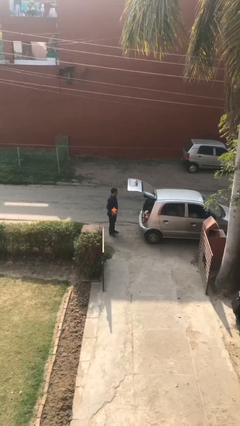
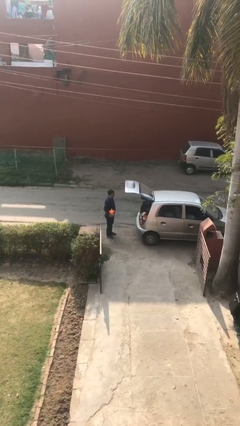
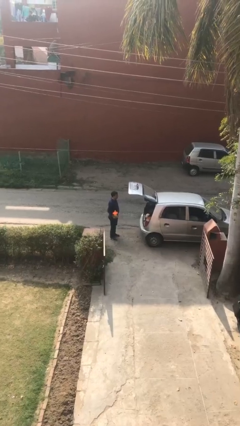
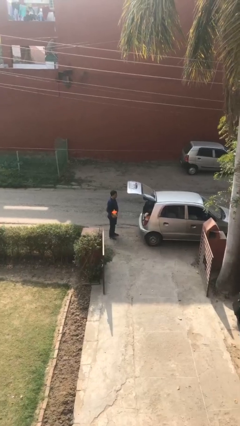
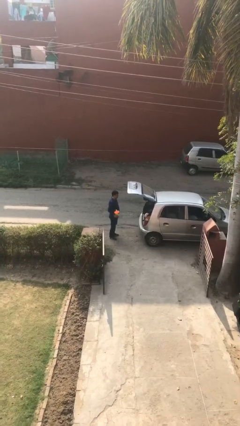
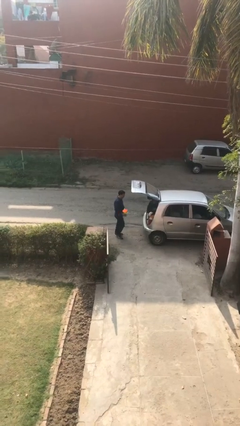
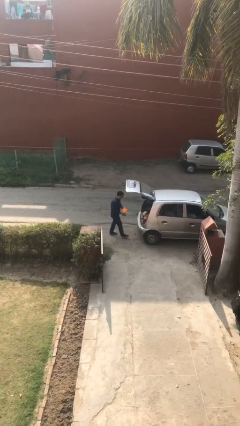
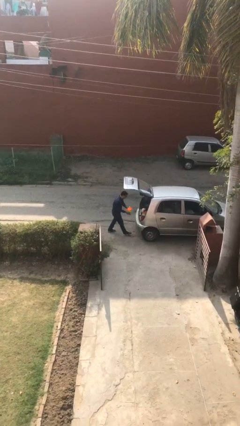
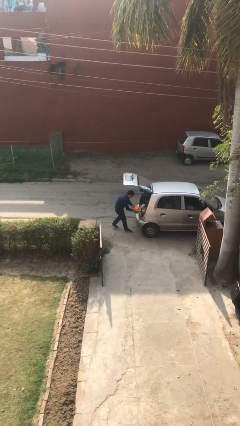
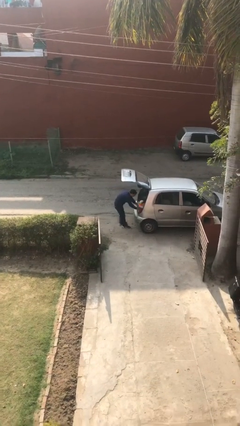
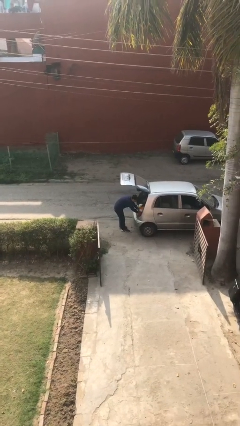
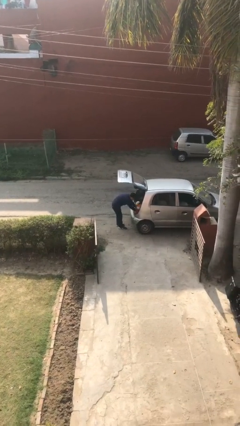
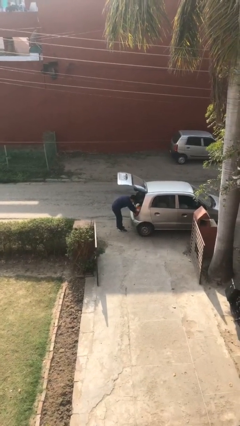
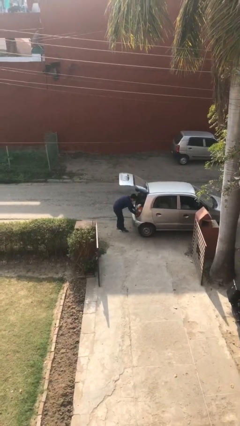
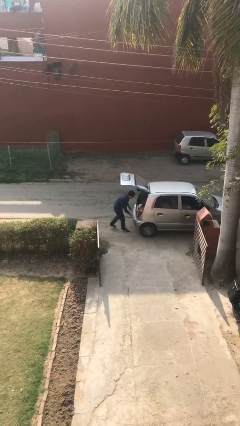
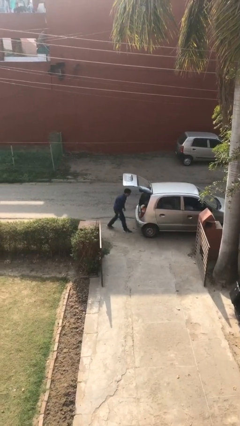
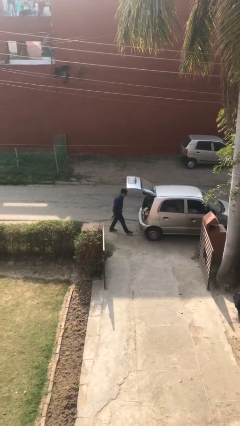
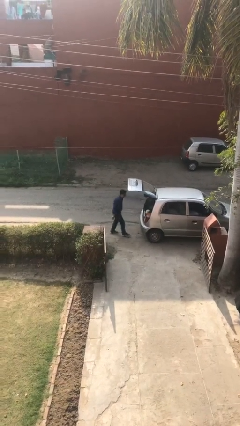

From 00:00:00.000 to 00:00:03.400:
person loads car

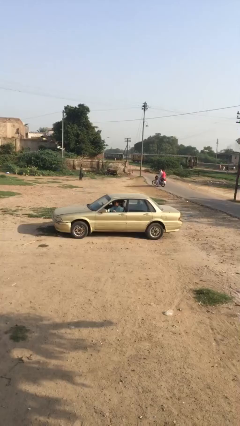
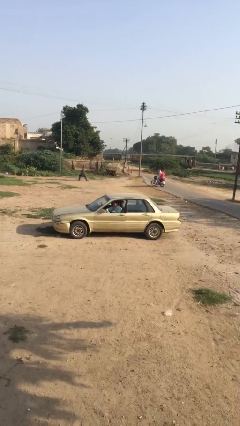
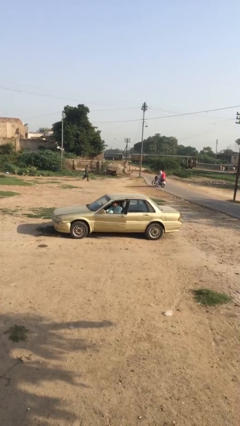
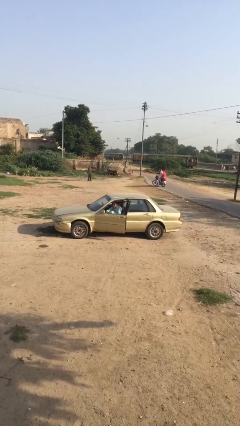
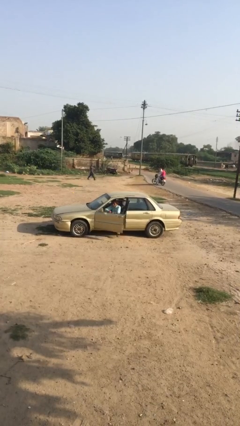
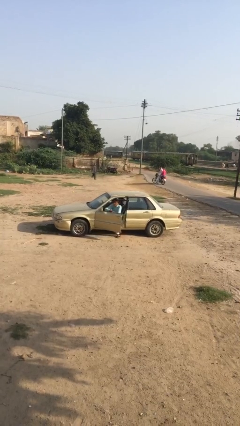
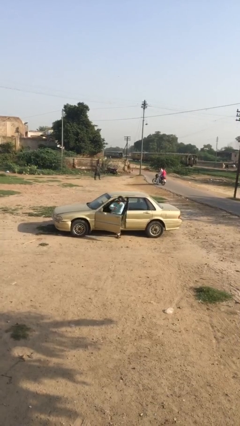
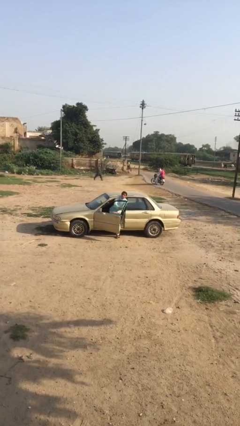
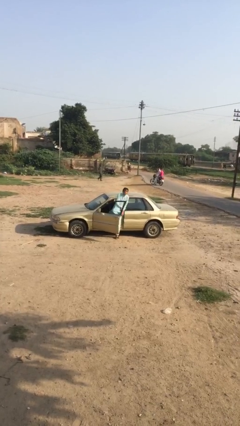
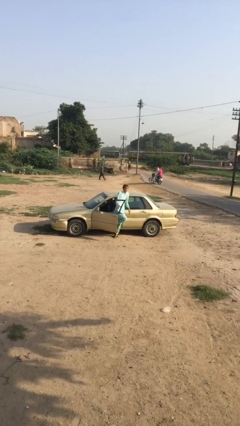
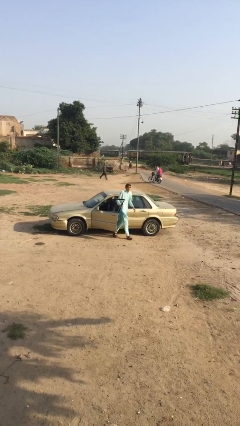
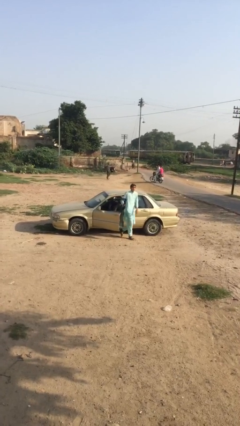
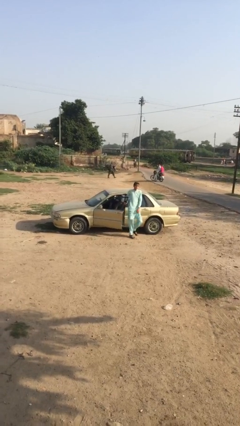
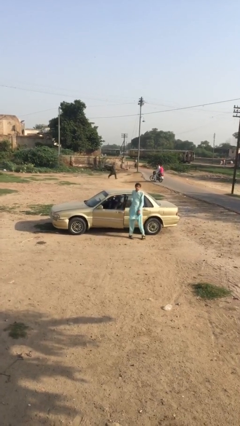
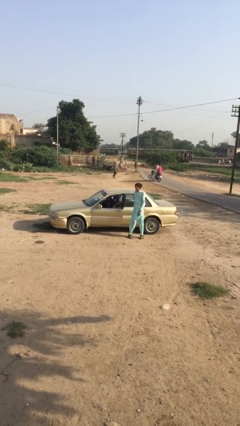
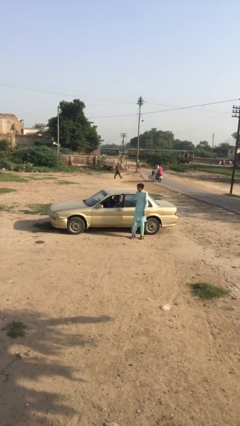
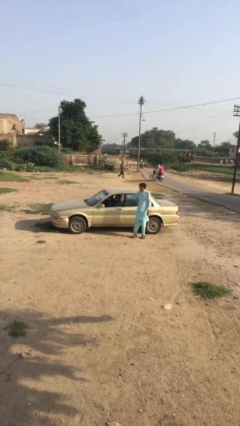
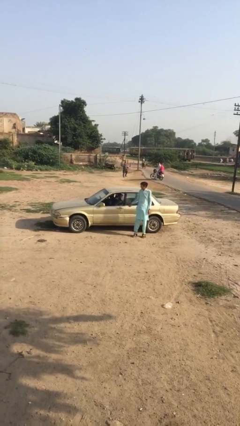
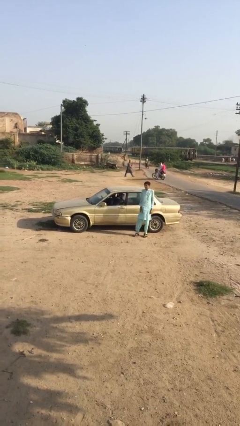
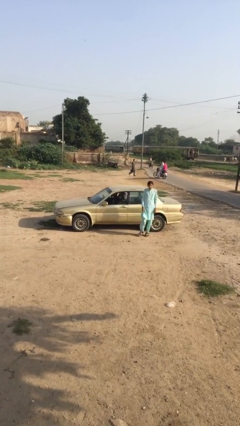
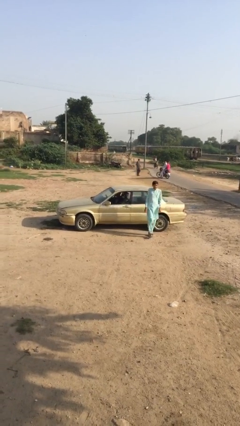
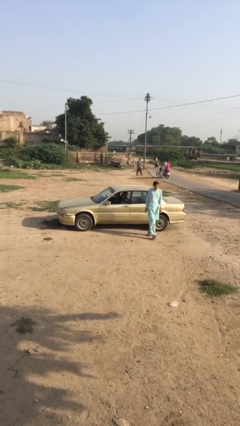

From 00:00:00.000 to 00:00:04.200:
car drops off person

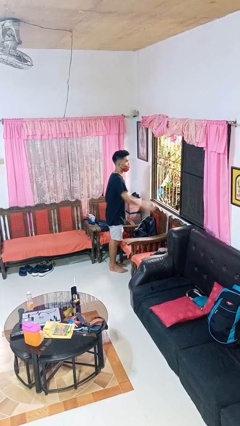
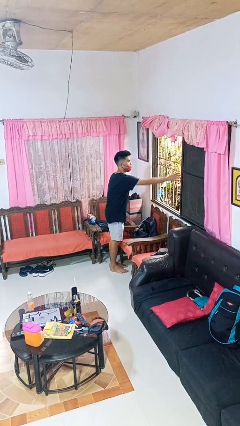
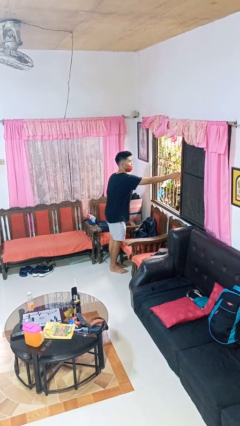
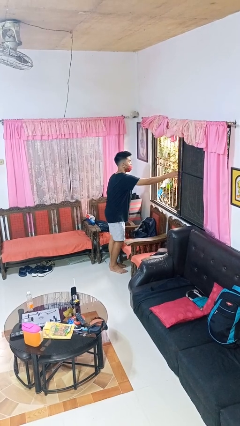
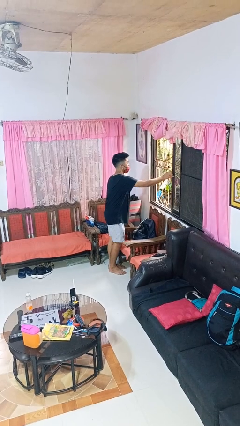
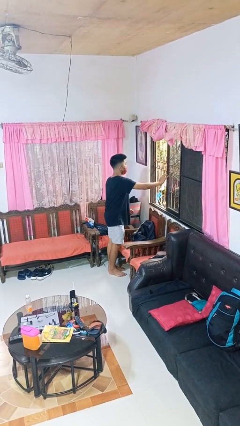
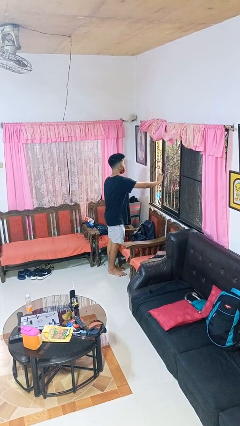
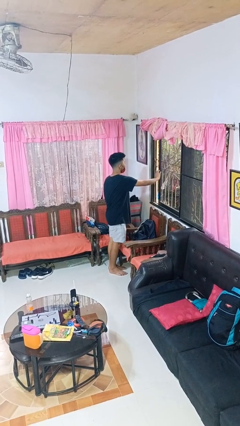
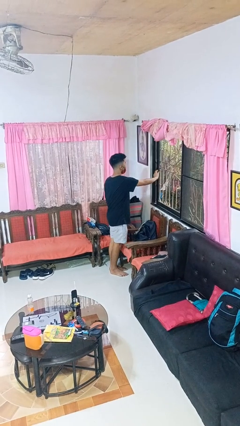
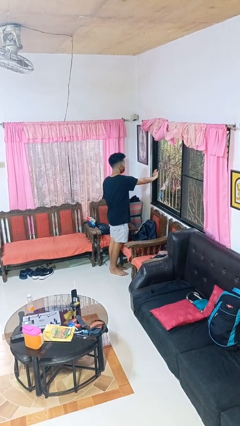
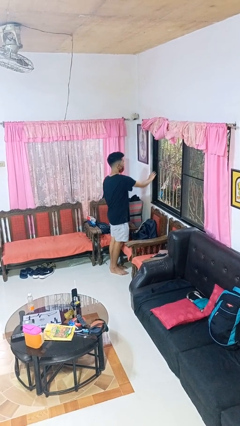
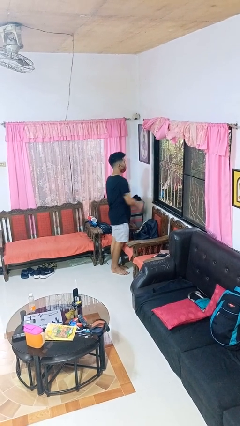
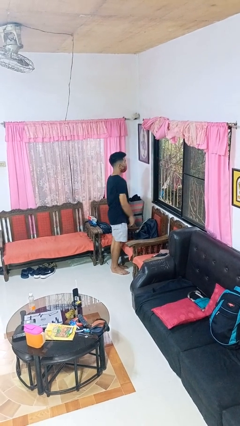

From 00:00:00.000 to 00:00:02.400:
person closes home window

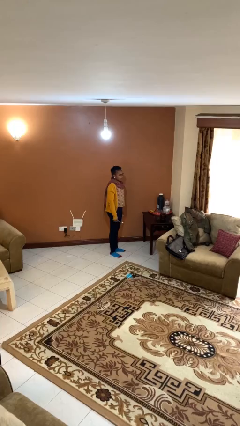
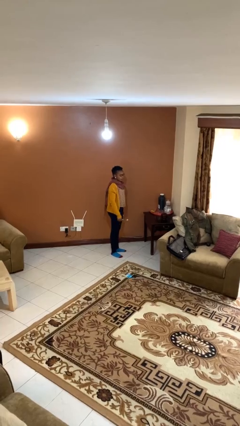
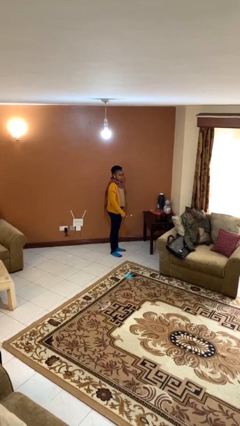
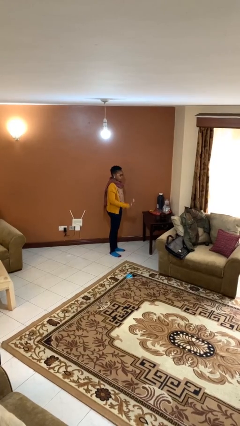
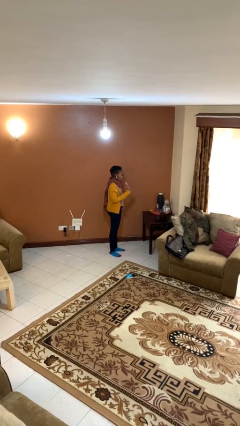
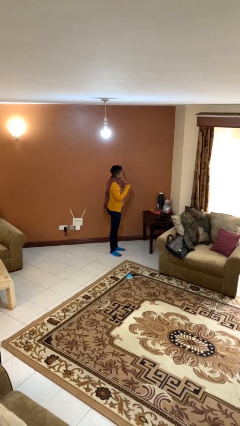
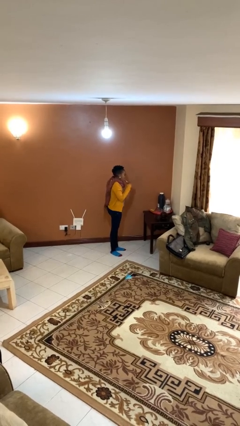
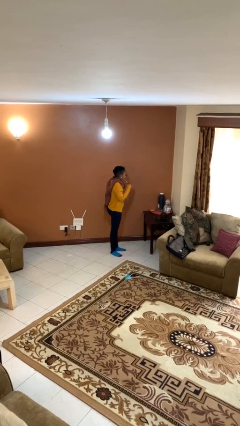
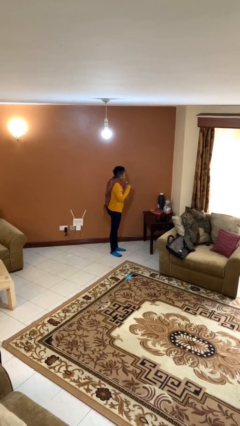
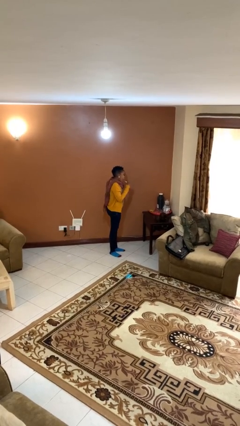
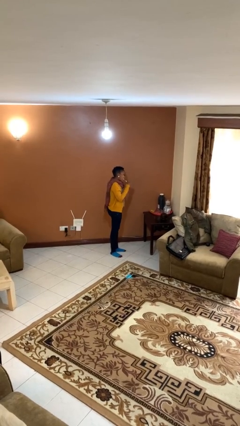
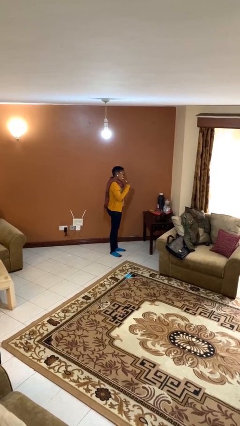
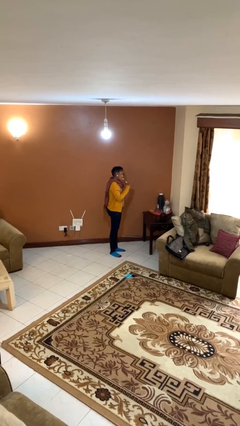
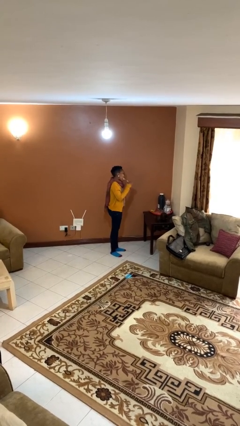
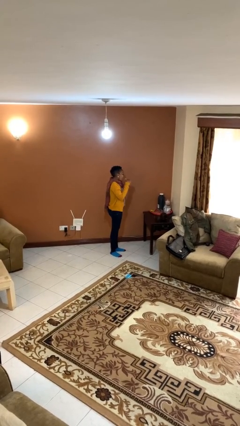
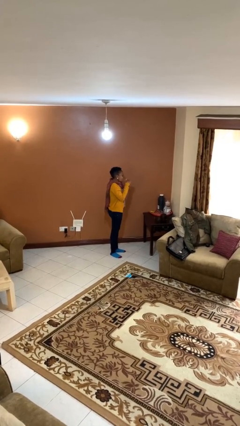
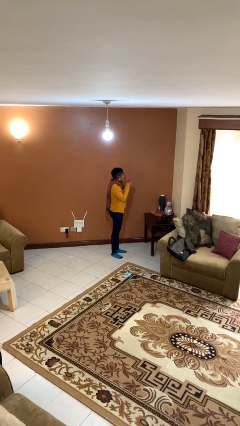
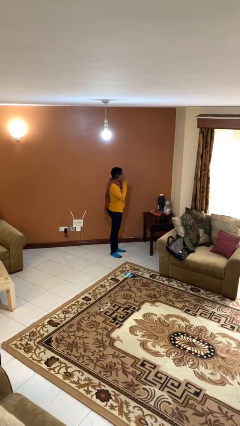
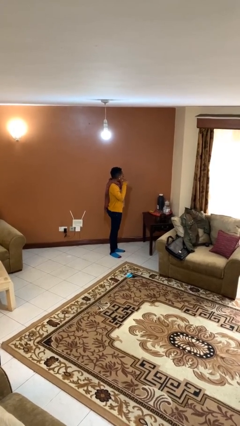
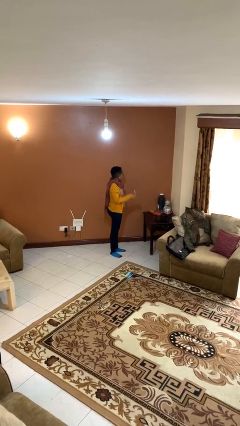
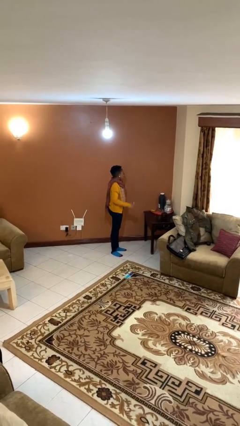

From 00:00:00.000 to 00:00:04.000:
person brushes teeth

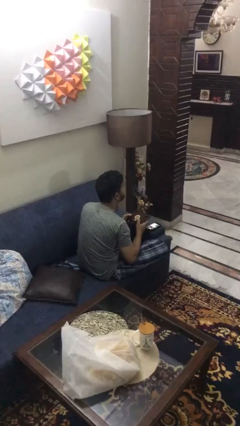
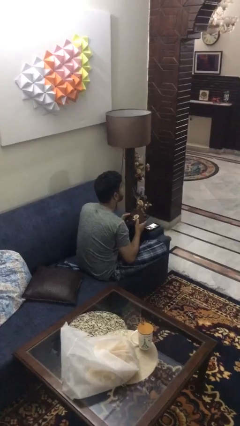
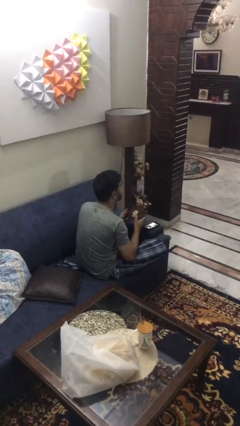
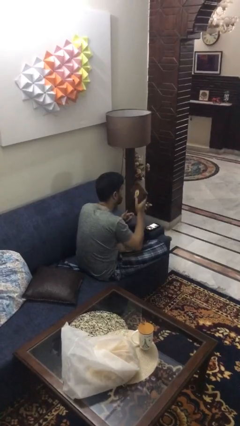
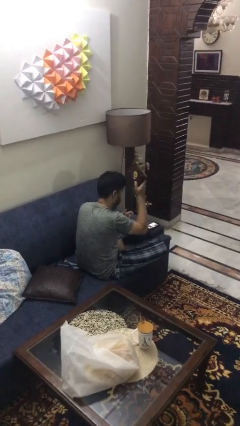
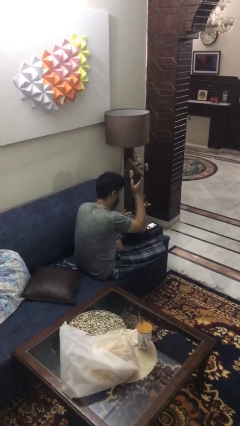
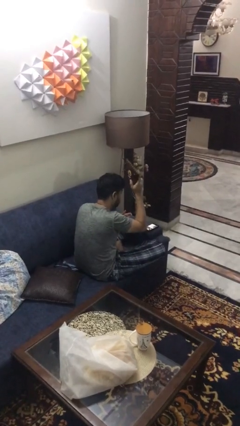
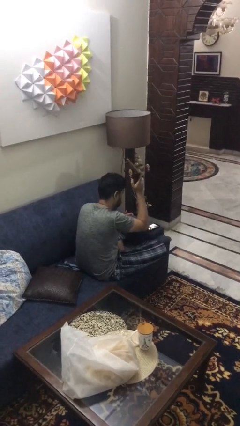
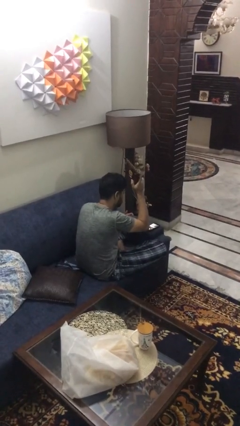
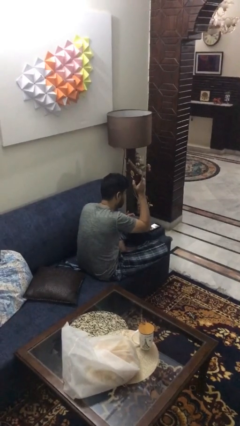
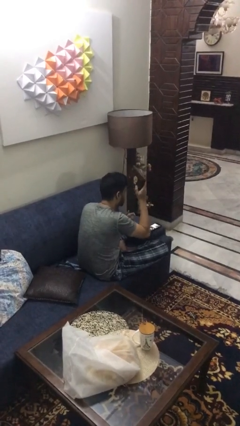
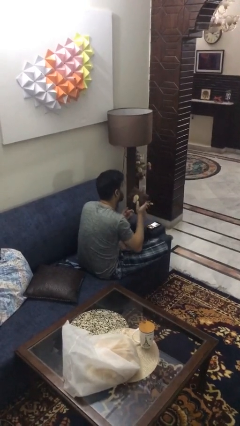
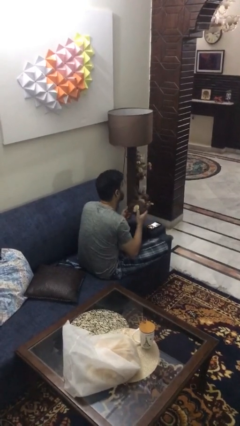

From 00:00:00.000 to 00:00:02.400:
person holds object above head

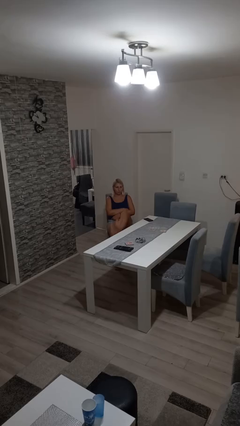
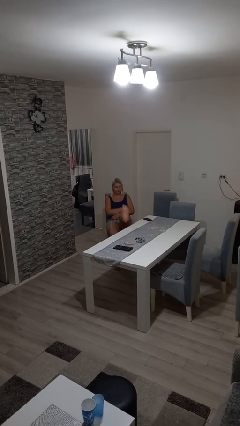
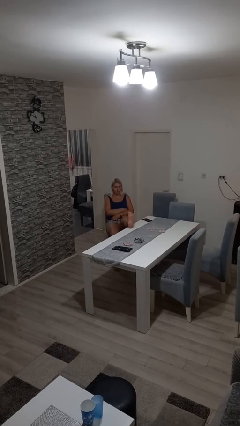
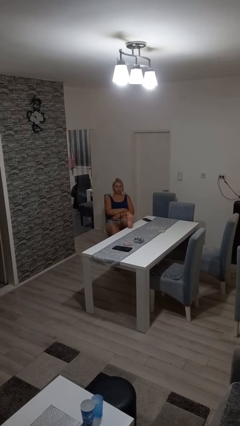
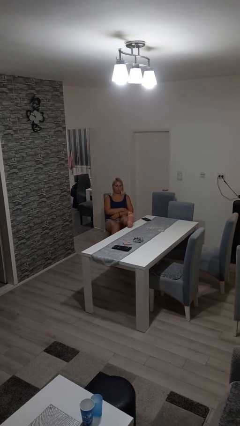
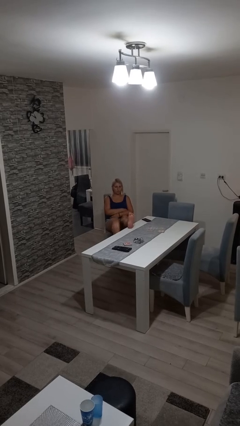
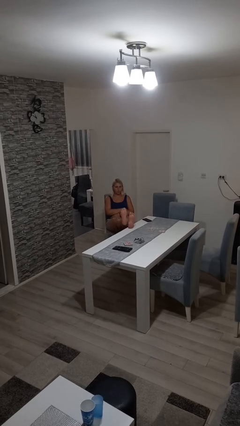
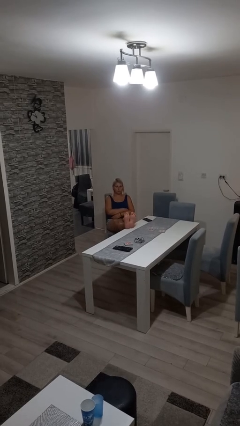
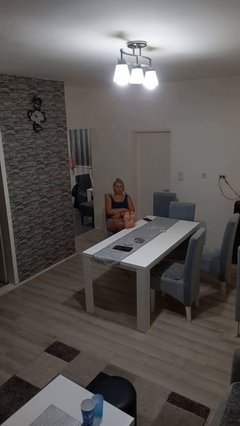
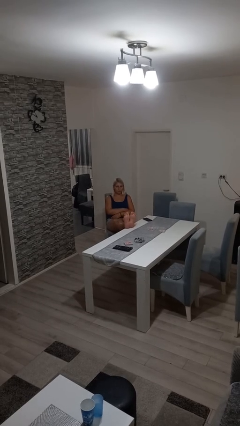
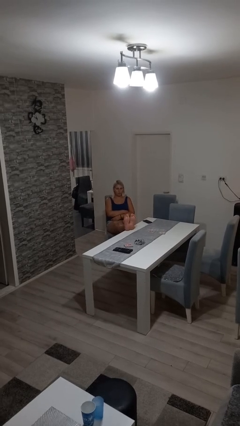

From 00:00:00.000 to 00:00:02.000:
person puts feet up
